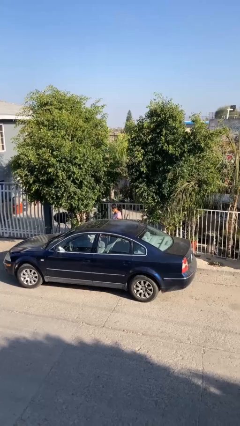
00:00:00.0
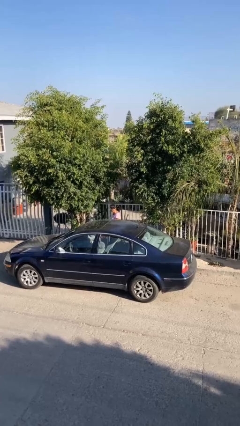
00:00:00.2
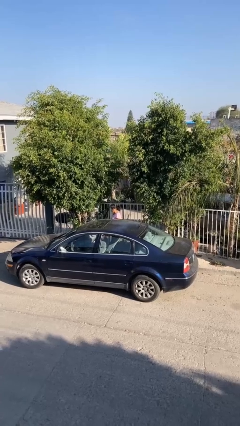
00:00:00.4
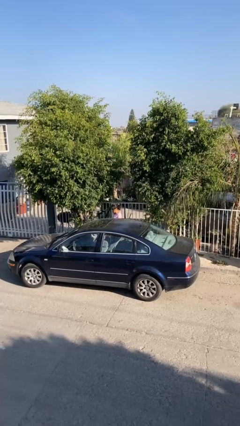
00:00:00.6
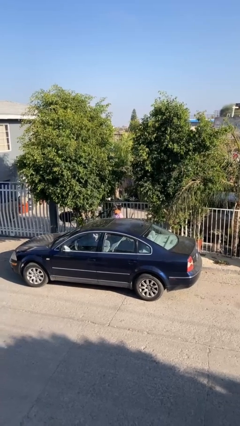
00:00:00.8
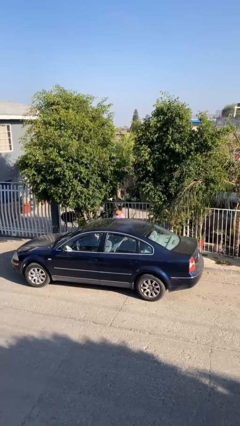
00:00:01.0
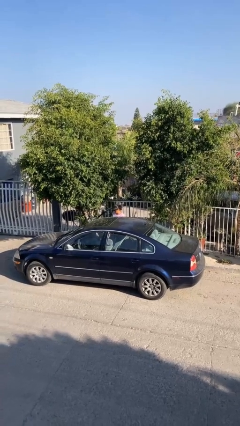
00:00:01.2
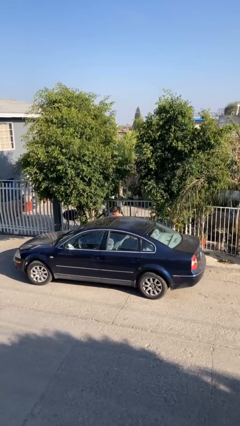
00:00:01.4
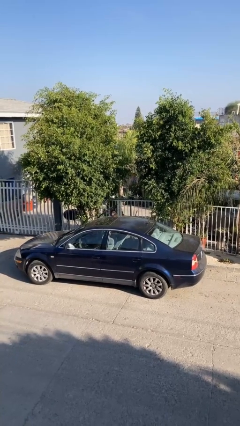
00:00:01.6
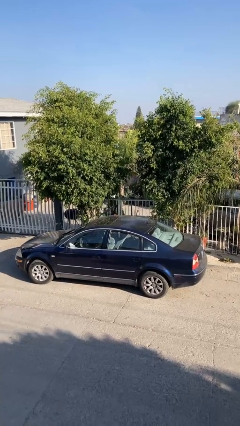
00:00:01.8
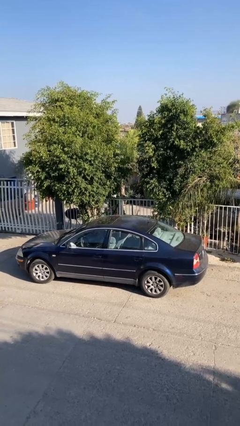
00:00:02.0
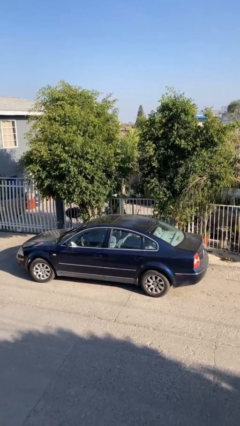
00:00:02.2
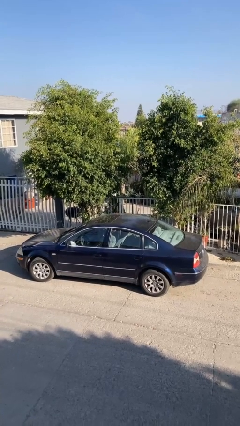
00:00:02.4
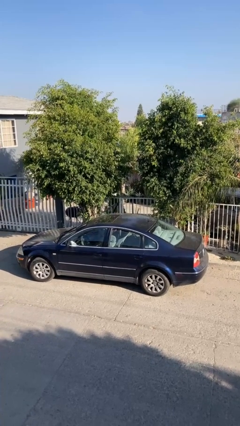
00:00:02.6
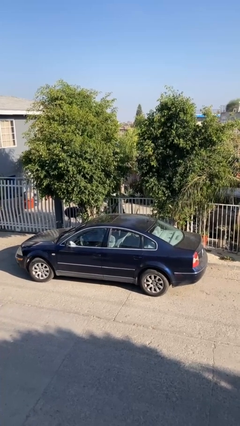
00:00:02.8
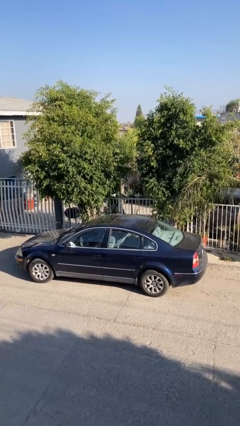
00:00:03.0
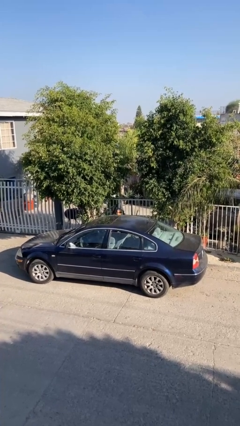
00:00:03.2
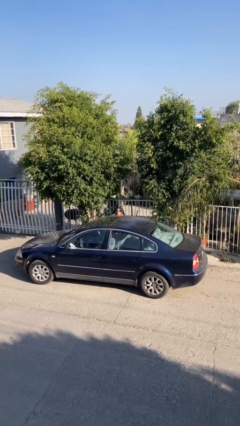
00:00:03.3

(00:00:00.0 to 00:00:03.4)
person unloads car

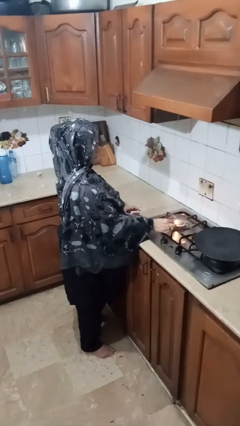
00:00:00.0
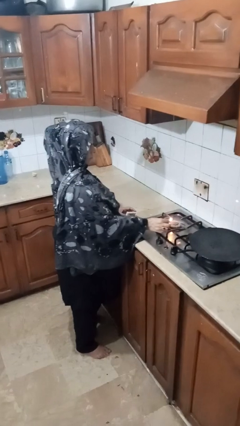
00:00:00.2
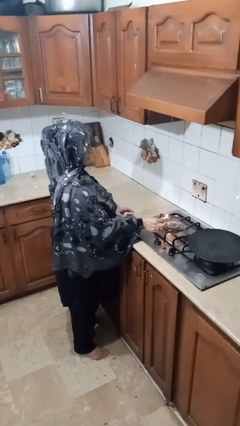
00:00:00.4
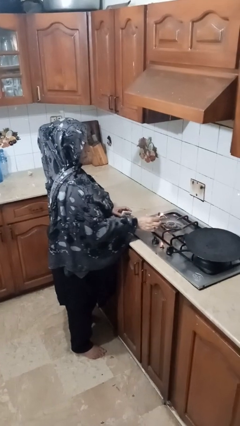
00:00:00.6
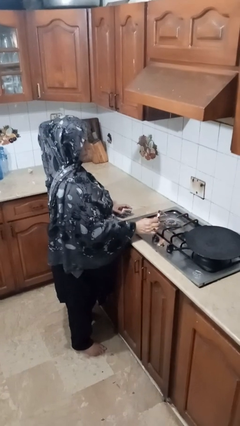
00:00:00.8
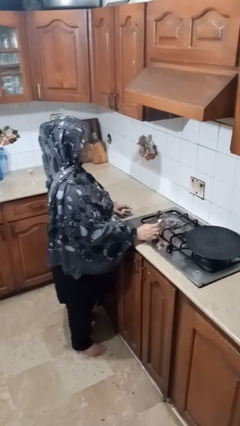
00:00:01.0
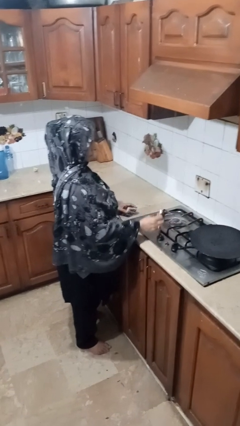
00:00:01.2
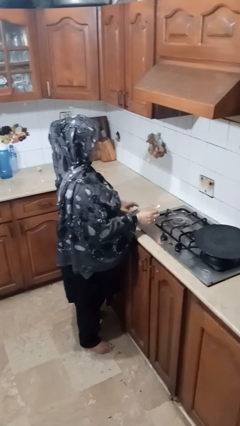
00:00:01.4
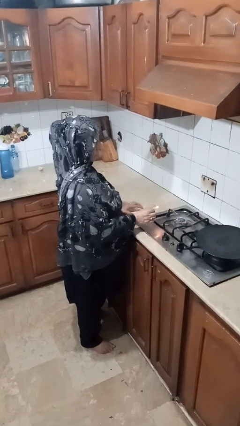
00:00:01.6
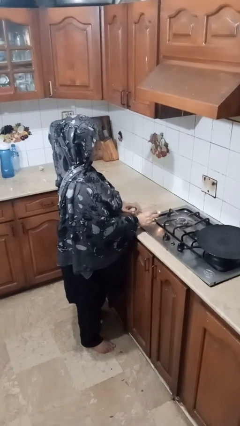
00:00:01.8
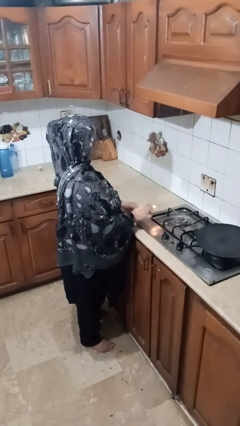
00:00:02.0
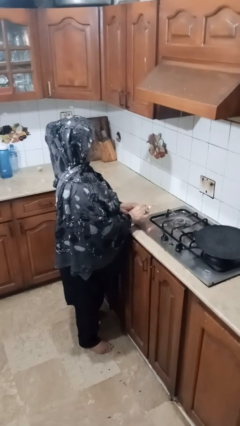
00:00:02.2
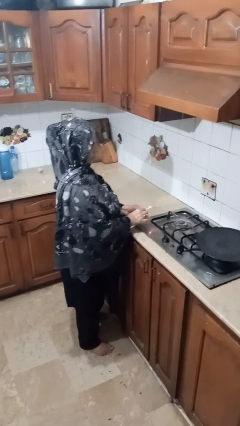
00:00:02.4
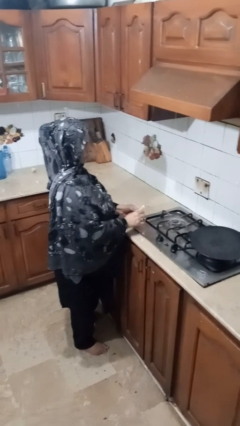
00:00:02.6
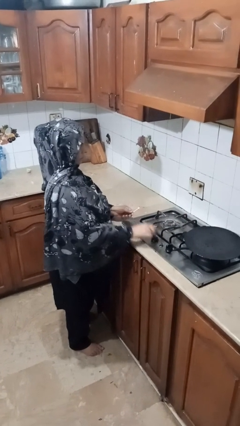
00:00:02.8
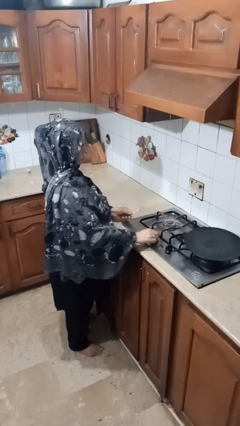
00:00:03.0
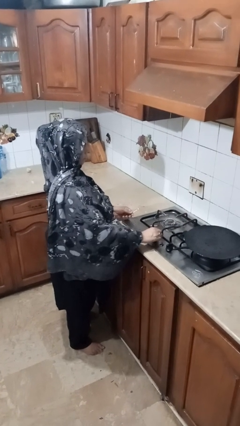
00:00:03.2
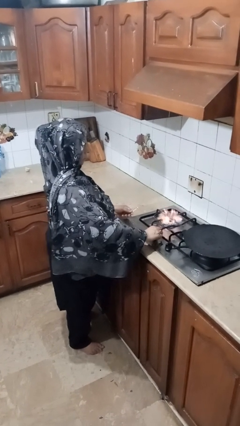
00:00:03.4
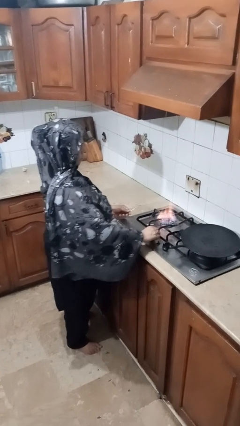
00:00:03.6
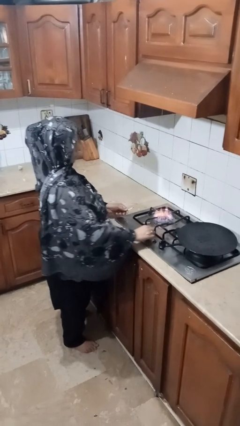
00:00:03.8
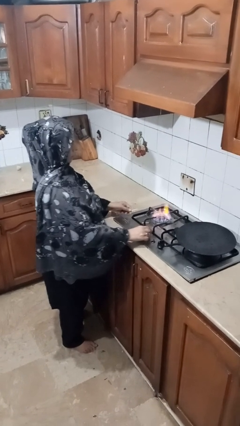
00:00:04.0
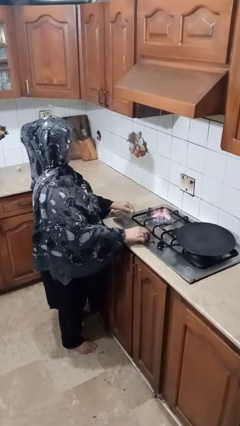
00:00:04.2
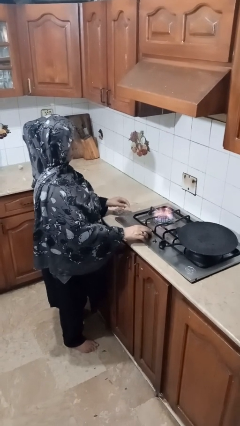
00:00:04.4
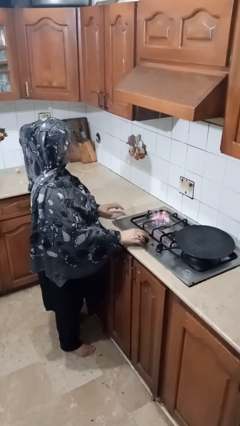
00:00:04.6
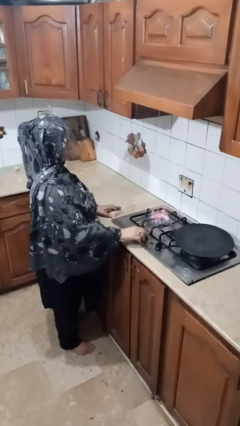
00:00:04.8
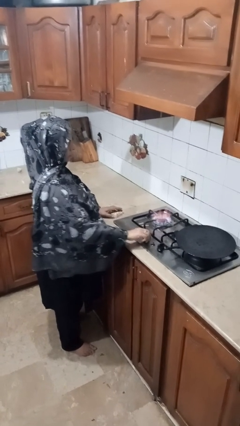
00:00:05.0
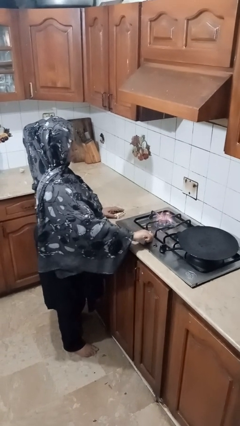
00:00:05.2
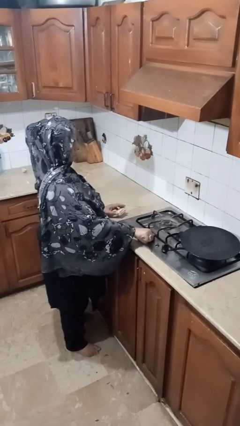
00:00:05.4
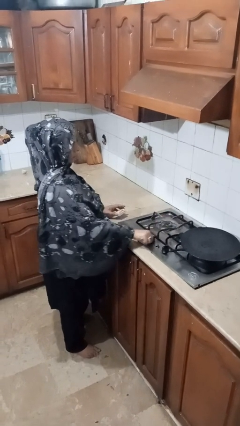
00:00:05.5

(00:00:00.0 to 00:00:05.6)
person turns on stovetop

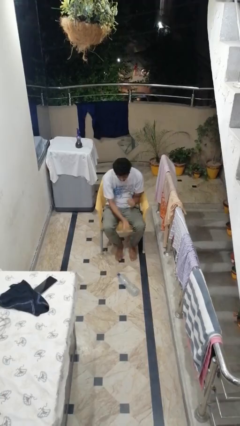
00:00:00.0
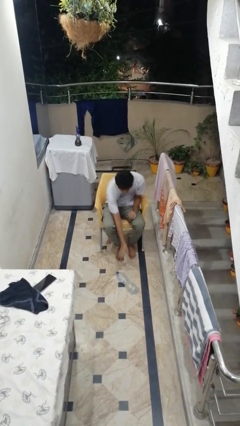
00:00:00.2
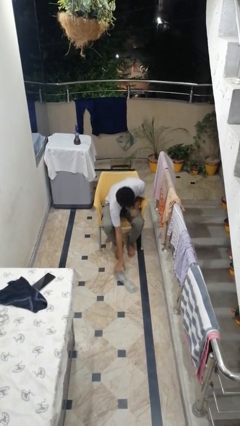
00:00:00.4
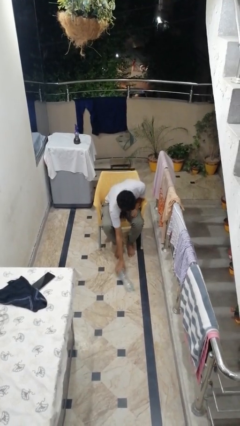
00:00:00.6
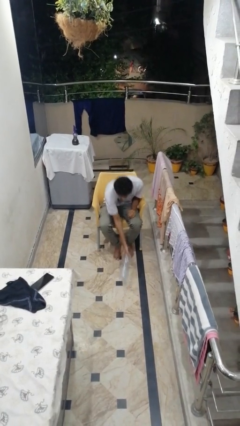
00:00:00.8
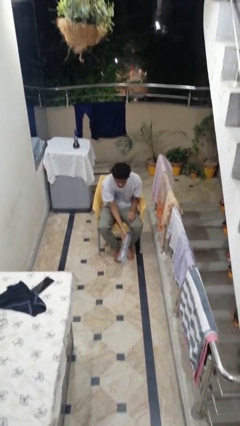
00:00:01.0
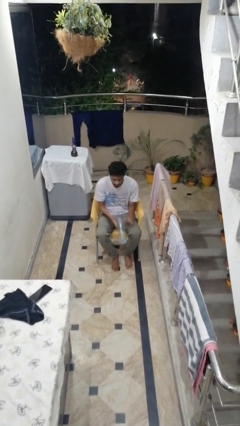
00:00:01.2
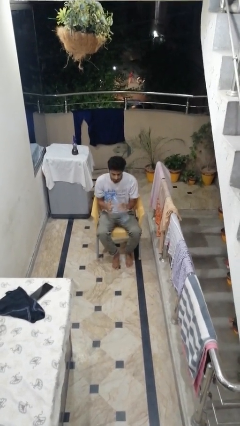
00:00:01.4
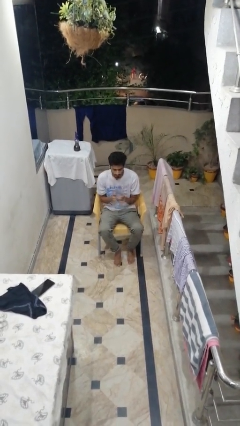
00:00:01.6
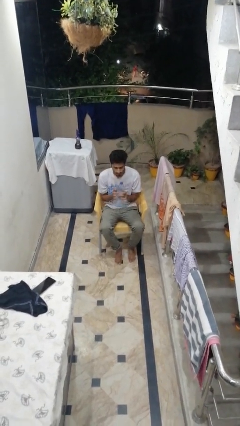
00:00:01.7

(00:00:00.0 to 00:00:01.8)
person picks up object from floor

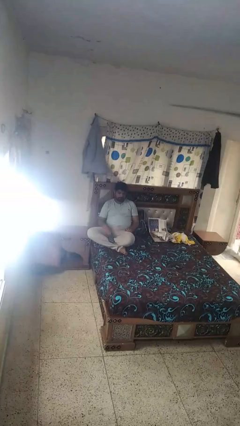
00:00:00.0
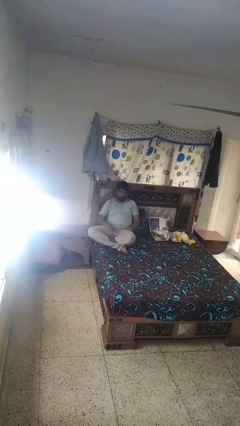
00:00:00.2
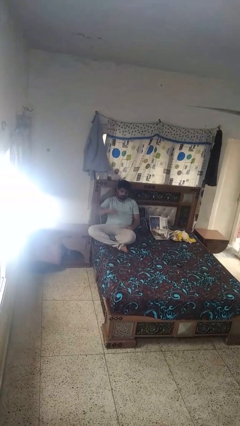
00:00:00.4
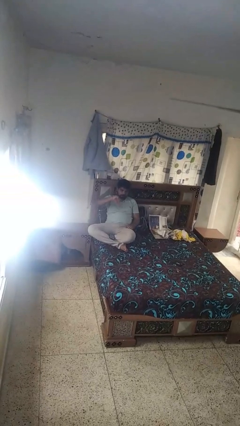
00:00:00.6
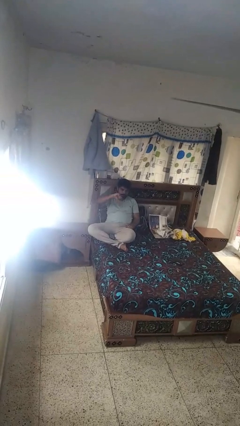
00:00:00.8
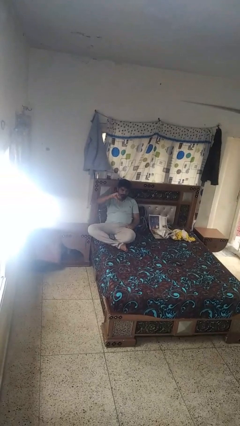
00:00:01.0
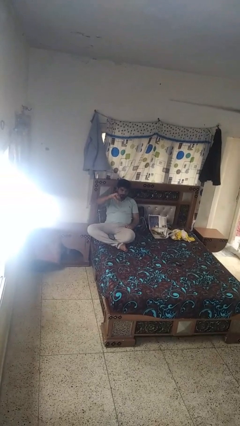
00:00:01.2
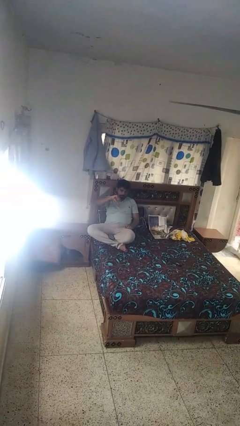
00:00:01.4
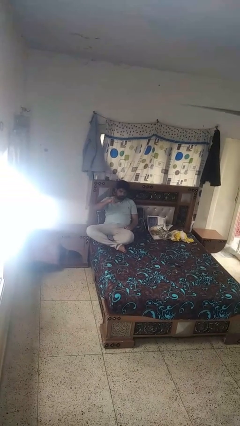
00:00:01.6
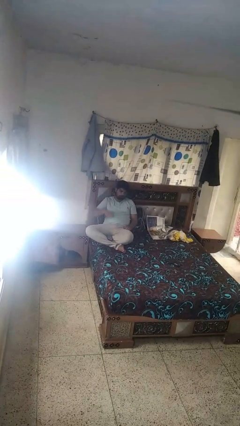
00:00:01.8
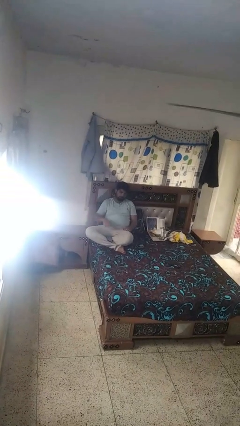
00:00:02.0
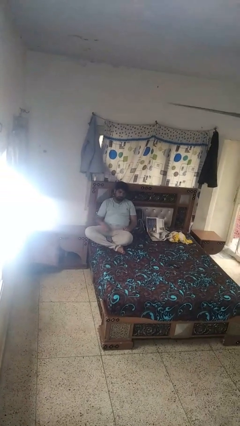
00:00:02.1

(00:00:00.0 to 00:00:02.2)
person gestures thumbs down

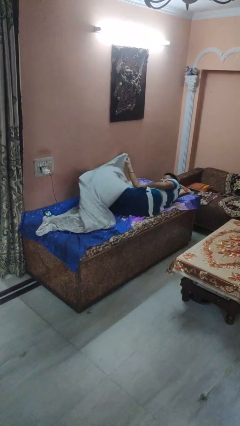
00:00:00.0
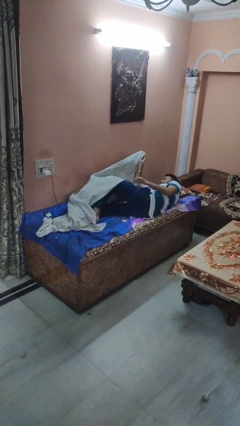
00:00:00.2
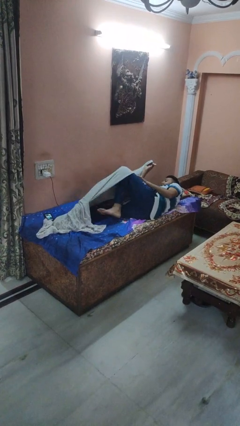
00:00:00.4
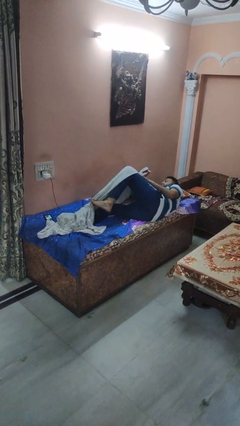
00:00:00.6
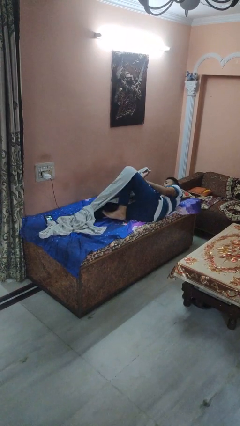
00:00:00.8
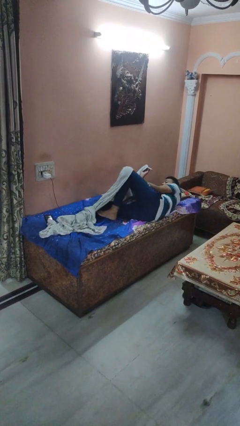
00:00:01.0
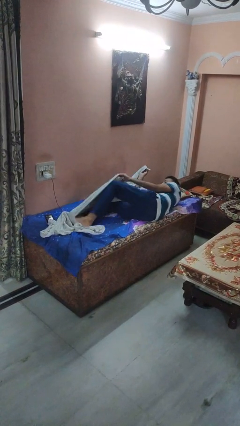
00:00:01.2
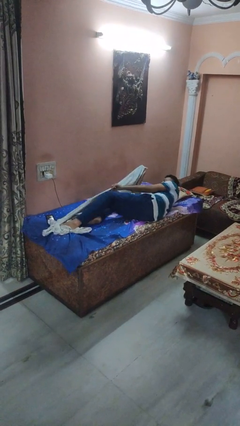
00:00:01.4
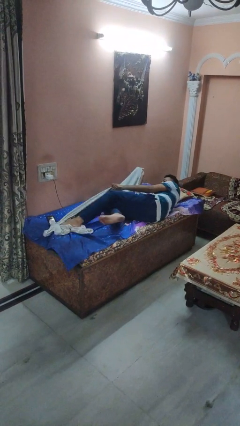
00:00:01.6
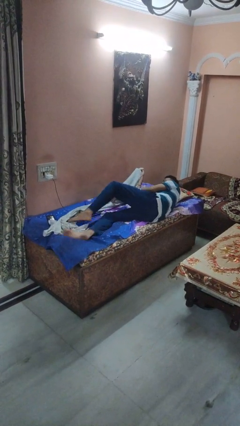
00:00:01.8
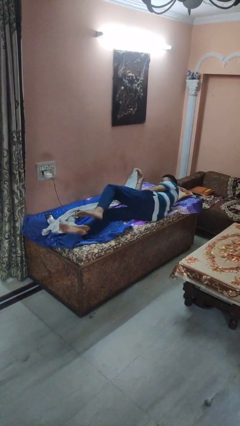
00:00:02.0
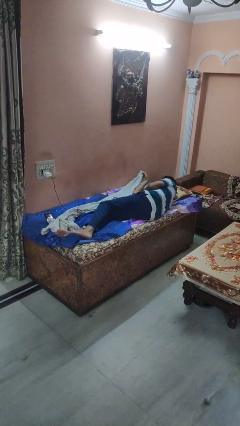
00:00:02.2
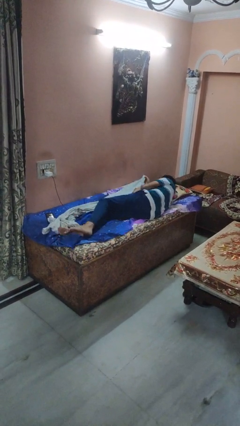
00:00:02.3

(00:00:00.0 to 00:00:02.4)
person uncovers with bedsheets

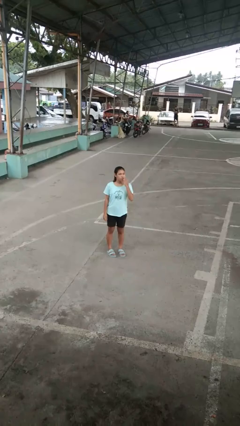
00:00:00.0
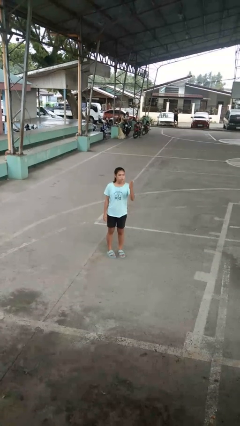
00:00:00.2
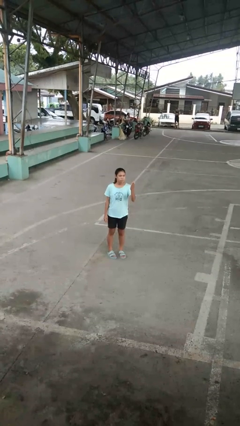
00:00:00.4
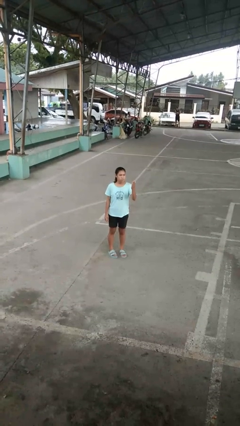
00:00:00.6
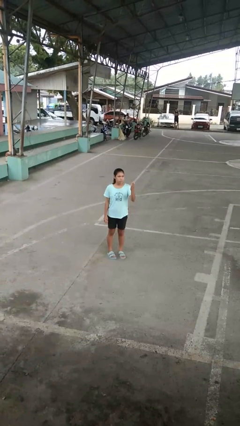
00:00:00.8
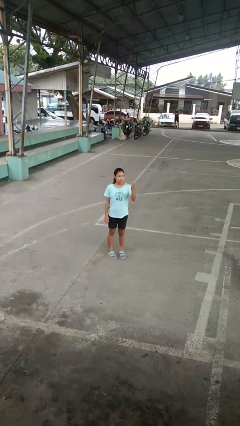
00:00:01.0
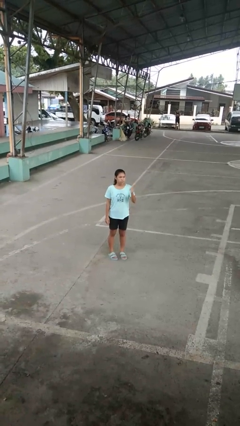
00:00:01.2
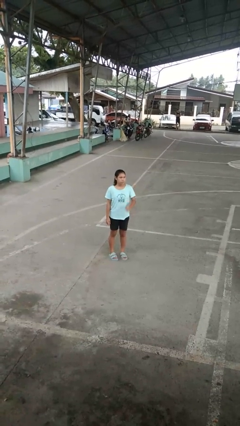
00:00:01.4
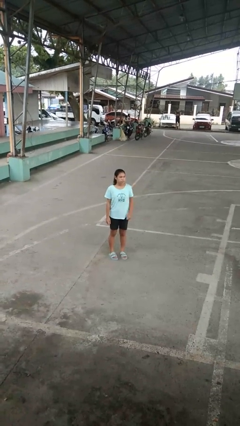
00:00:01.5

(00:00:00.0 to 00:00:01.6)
person gestures blow kiss
